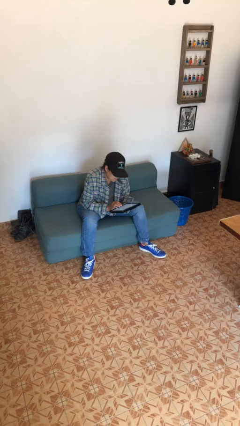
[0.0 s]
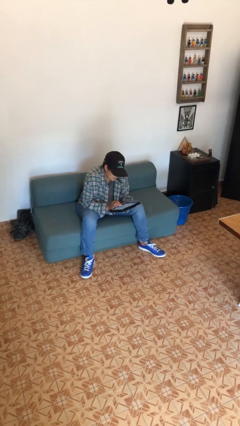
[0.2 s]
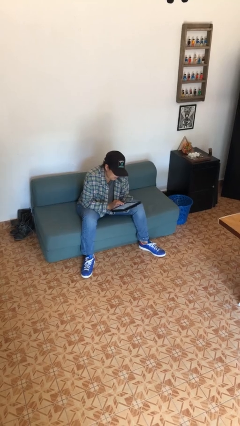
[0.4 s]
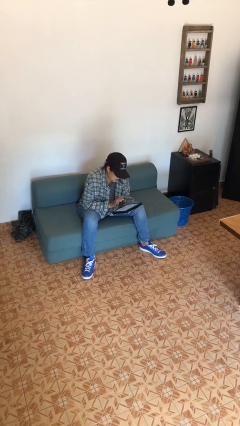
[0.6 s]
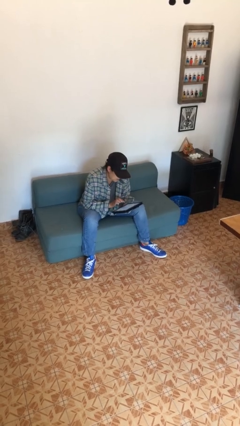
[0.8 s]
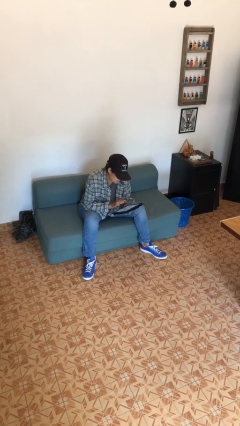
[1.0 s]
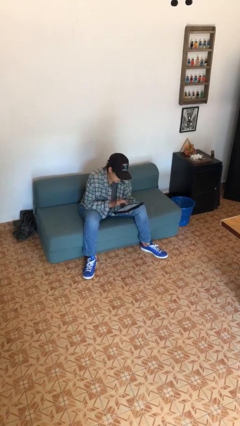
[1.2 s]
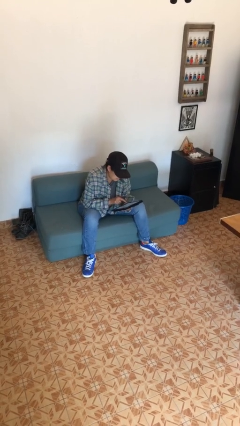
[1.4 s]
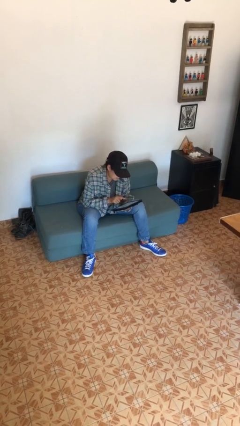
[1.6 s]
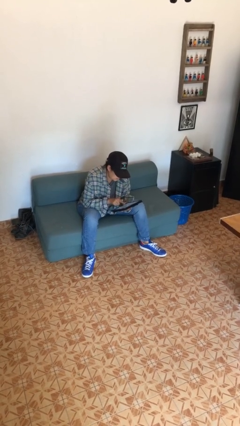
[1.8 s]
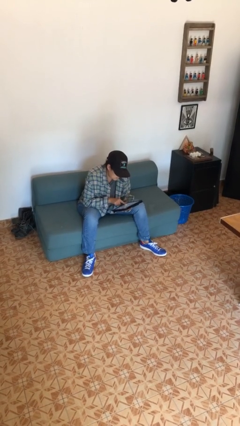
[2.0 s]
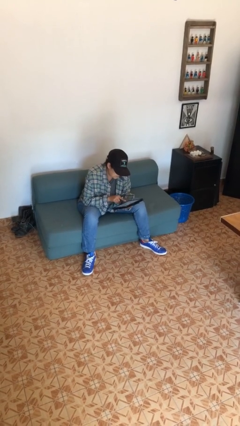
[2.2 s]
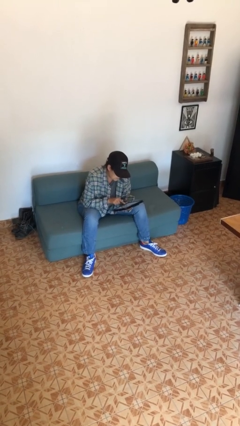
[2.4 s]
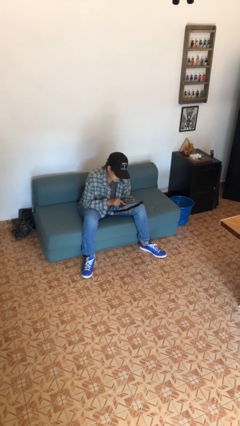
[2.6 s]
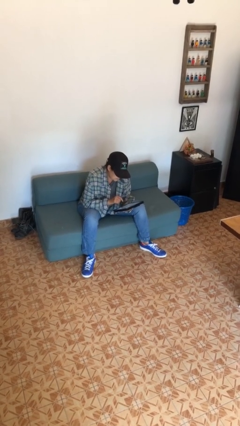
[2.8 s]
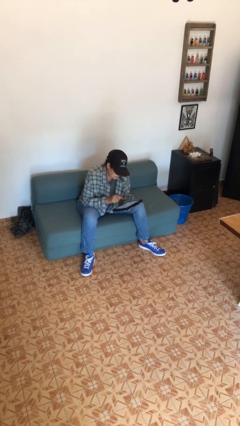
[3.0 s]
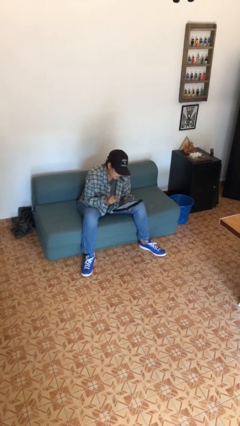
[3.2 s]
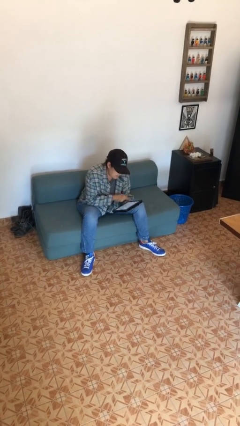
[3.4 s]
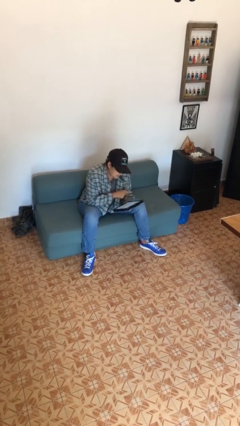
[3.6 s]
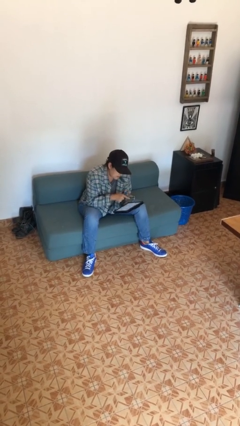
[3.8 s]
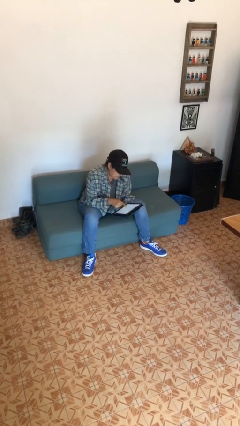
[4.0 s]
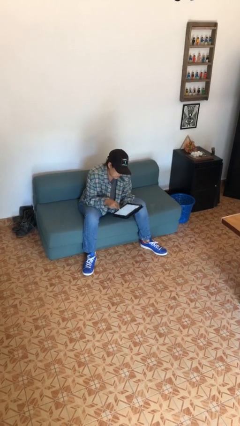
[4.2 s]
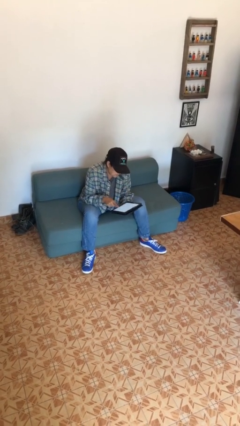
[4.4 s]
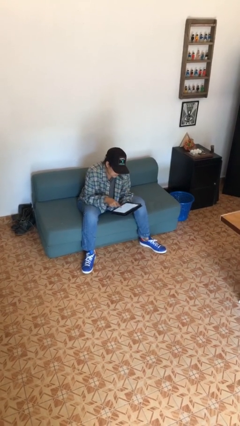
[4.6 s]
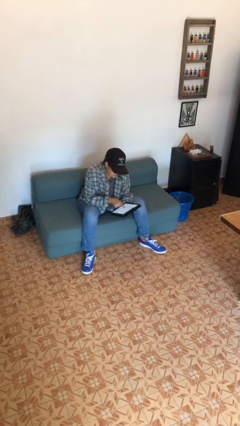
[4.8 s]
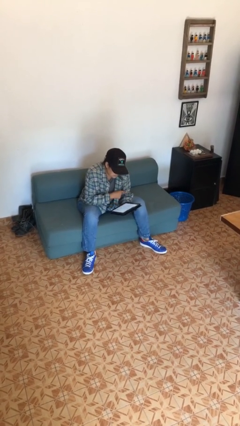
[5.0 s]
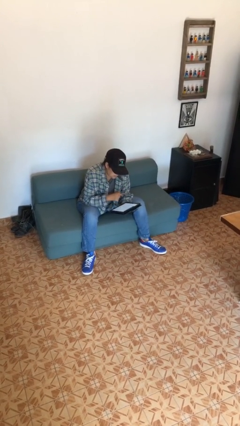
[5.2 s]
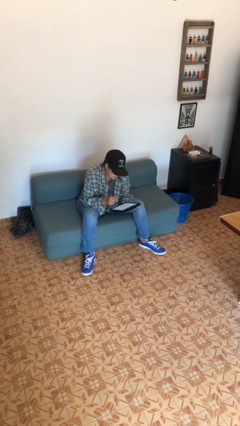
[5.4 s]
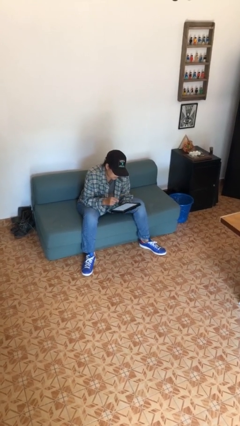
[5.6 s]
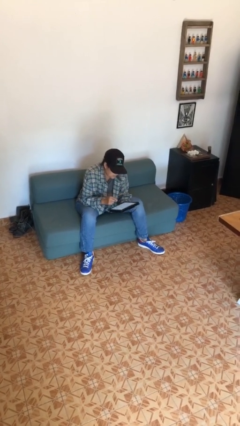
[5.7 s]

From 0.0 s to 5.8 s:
person interacts with tablet

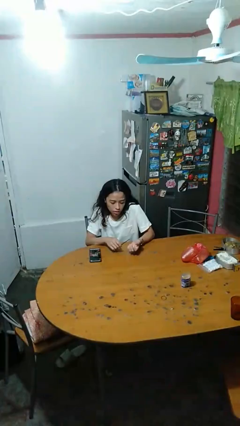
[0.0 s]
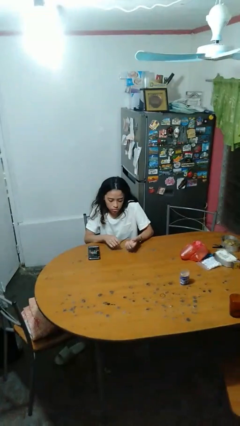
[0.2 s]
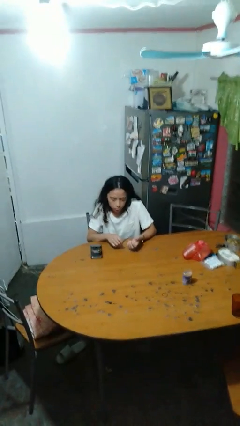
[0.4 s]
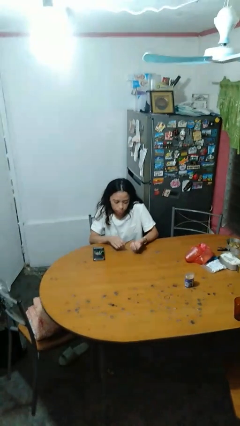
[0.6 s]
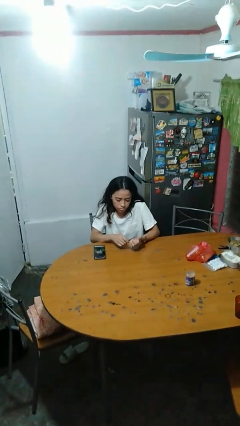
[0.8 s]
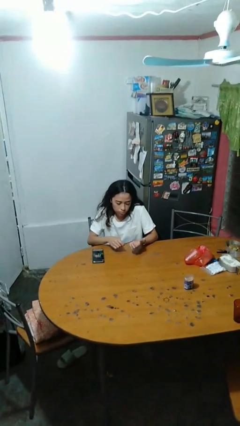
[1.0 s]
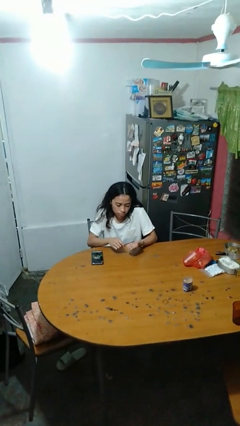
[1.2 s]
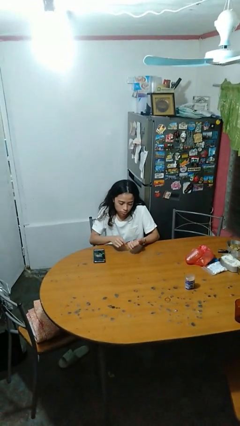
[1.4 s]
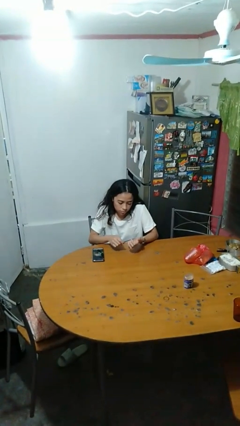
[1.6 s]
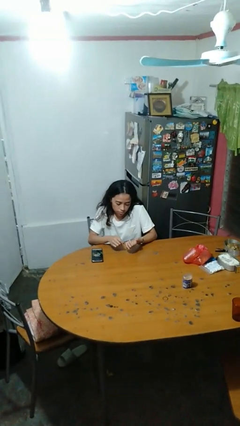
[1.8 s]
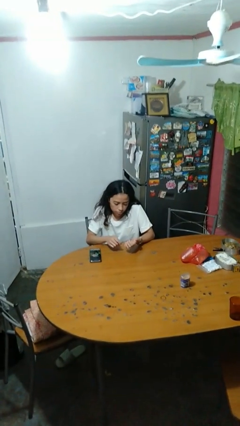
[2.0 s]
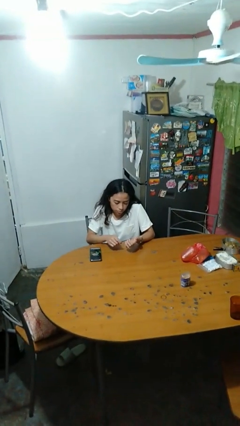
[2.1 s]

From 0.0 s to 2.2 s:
person files fingernails

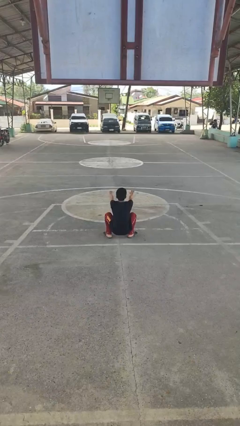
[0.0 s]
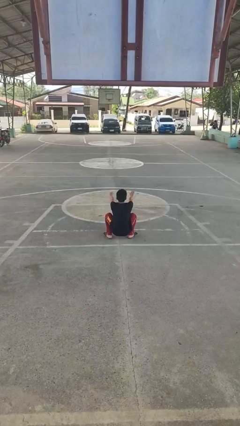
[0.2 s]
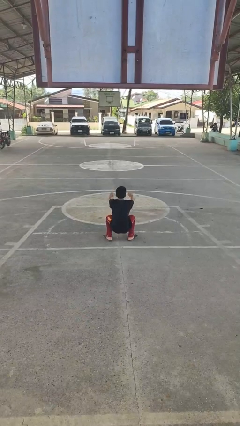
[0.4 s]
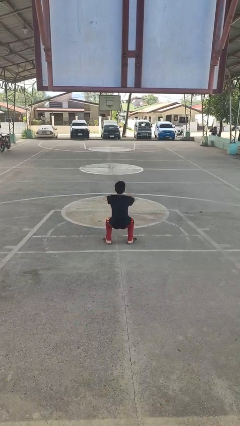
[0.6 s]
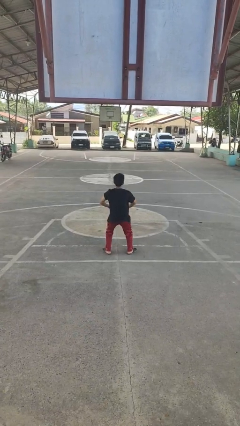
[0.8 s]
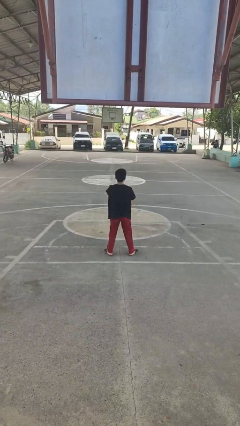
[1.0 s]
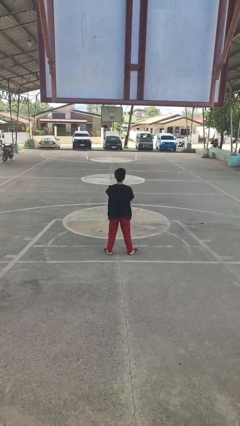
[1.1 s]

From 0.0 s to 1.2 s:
person stands up

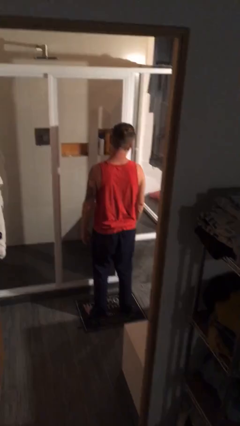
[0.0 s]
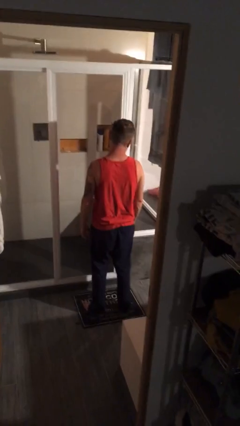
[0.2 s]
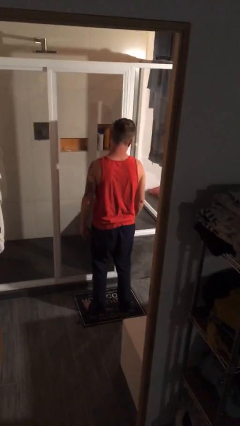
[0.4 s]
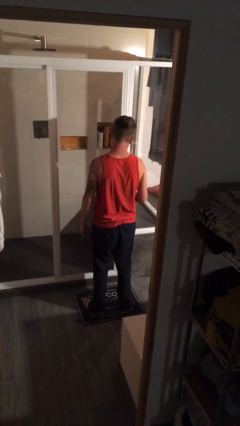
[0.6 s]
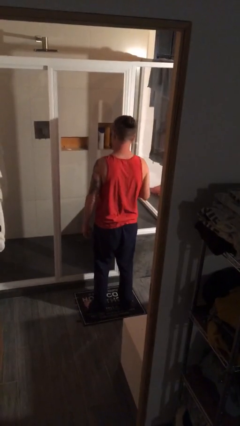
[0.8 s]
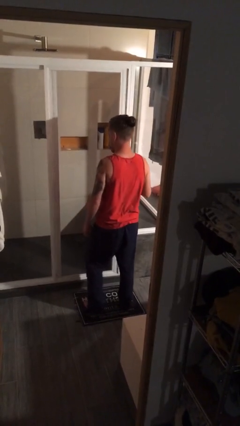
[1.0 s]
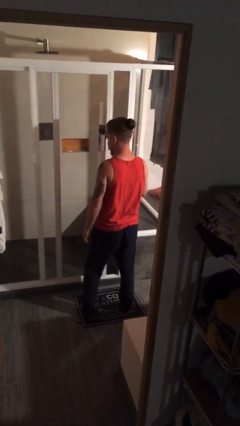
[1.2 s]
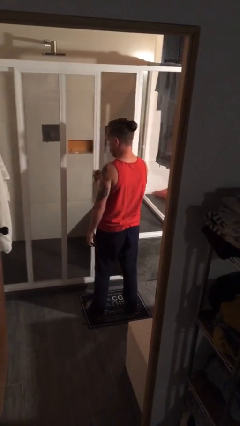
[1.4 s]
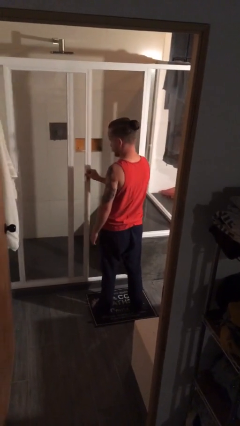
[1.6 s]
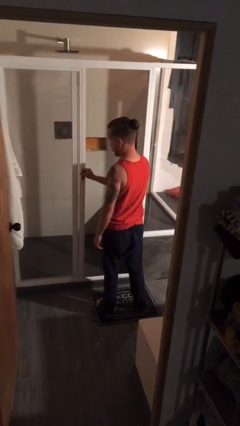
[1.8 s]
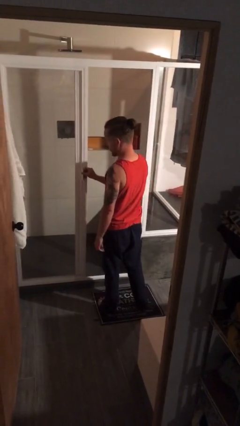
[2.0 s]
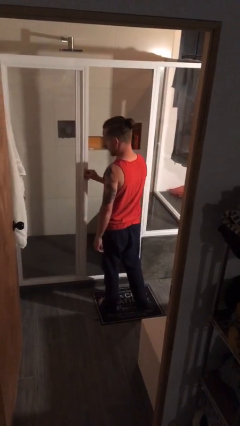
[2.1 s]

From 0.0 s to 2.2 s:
person opens sliding door

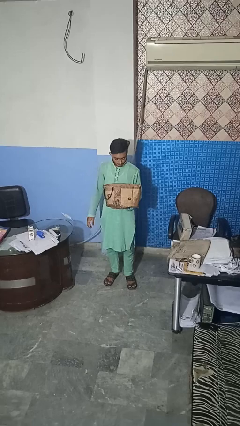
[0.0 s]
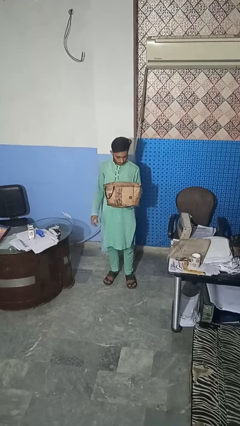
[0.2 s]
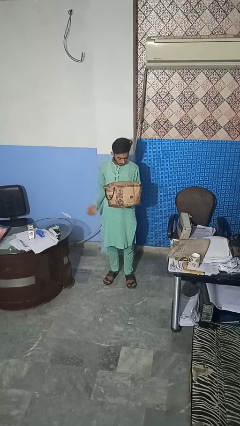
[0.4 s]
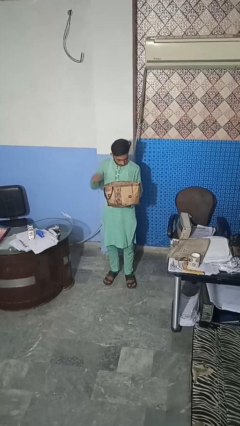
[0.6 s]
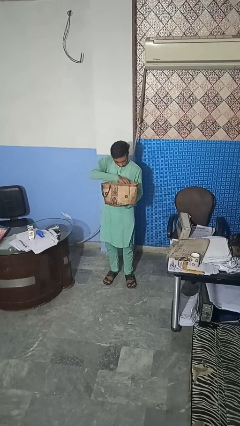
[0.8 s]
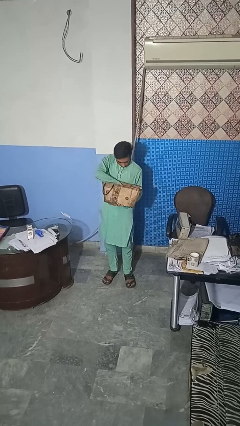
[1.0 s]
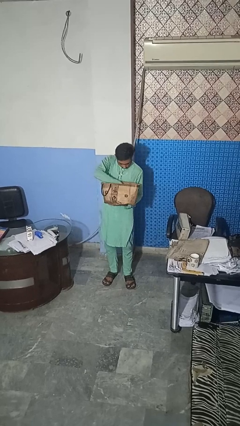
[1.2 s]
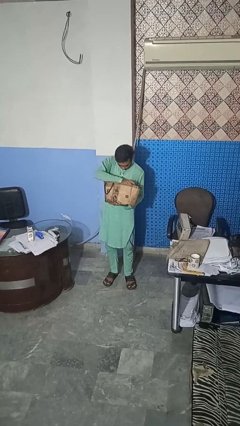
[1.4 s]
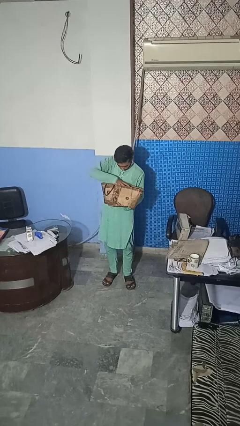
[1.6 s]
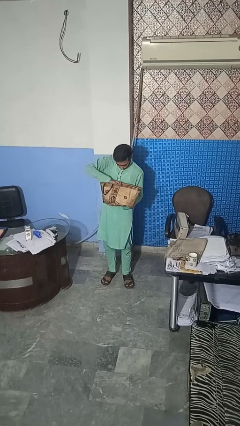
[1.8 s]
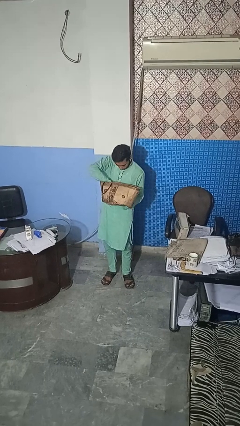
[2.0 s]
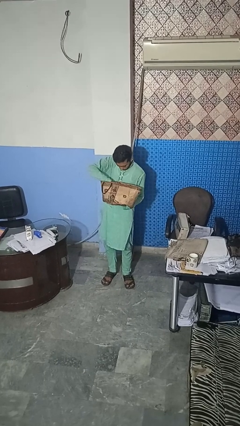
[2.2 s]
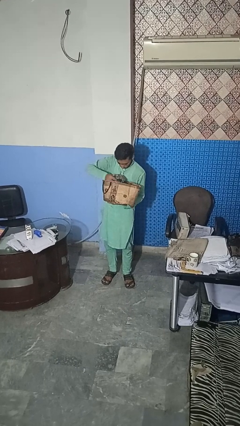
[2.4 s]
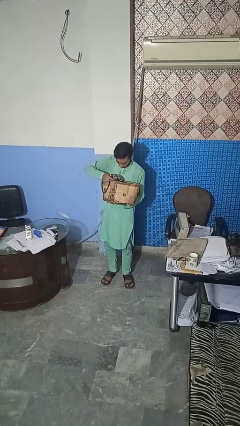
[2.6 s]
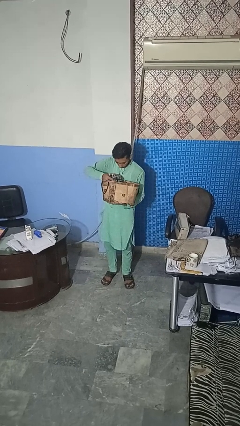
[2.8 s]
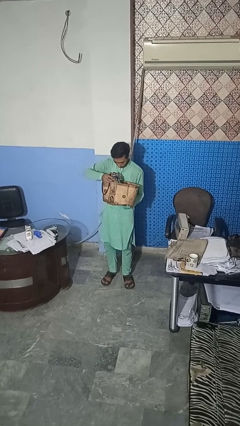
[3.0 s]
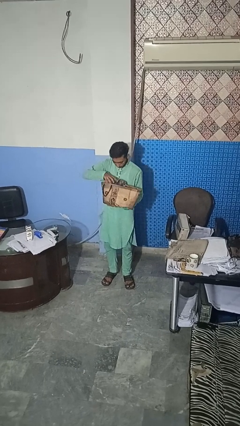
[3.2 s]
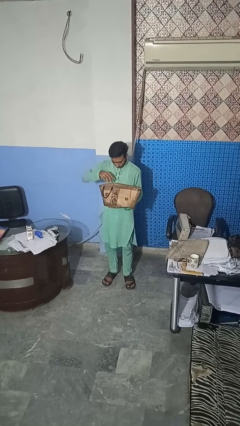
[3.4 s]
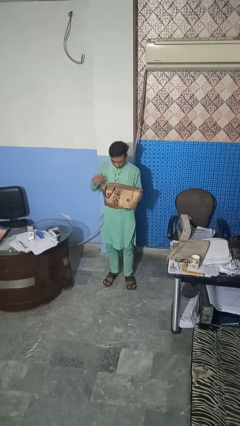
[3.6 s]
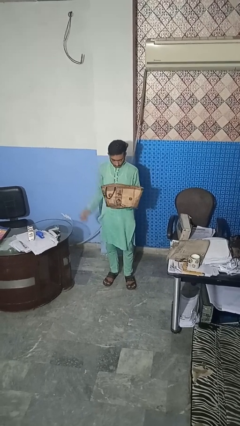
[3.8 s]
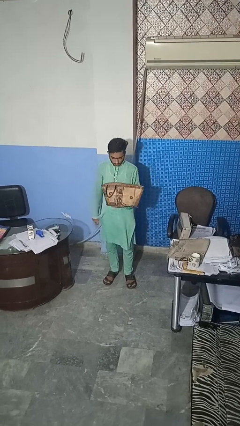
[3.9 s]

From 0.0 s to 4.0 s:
person searches in bag

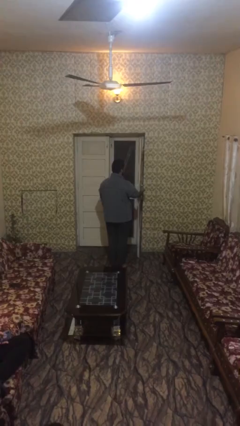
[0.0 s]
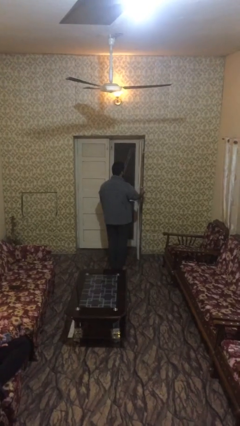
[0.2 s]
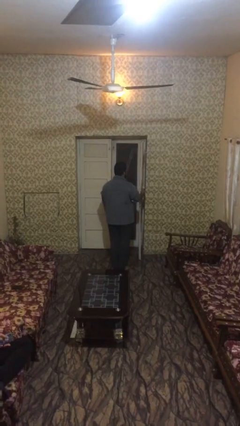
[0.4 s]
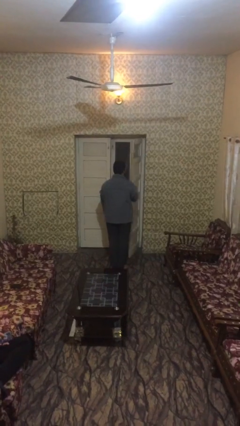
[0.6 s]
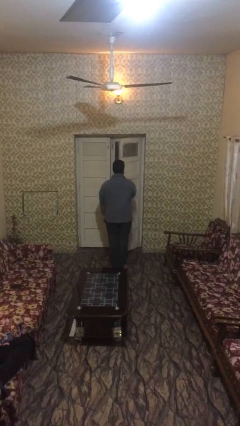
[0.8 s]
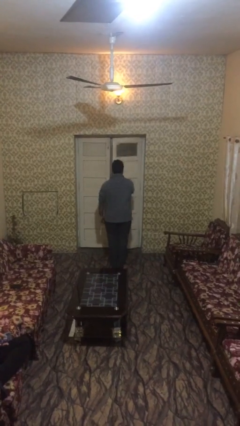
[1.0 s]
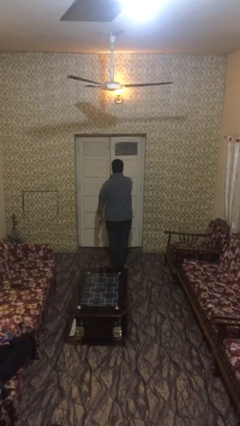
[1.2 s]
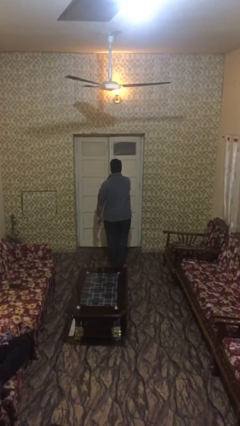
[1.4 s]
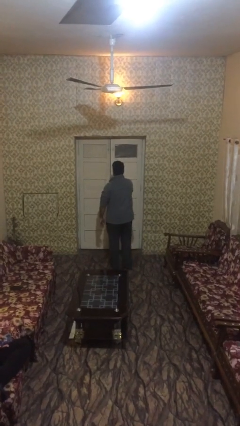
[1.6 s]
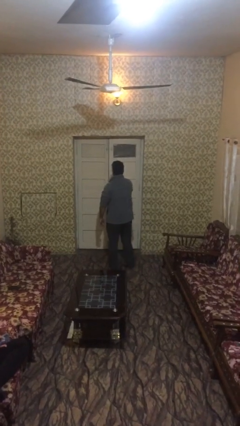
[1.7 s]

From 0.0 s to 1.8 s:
person closes facility door
